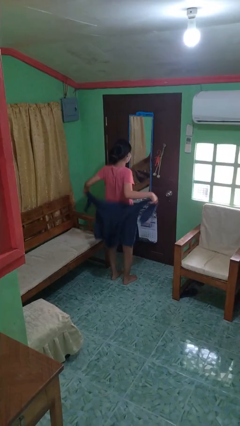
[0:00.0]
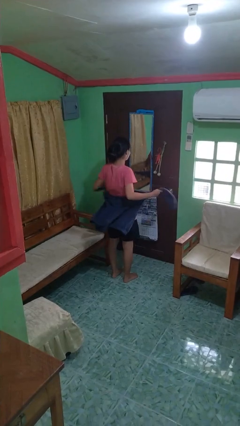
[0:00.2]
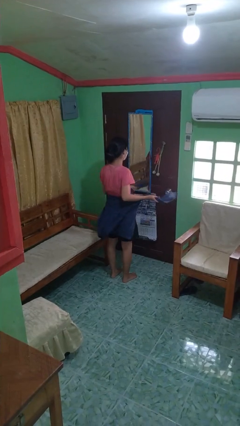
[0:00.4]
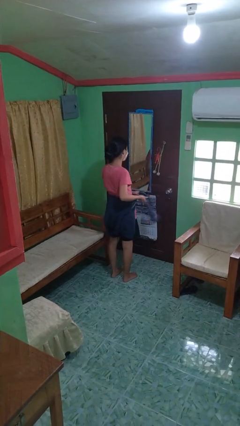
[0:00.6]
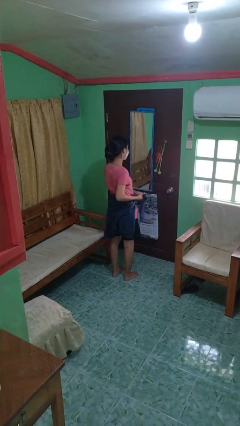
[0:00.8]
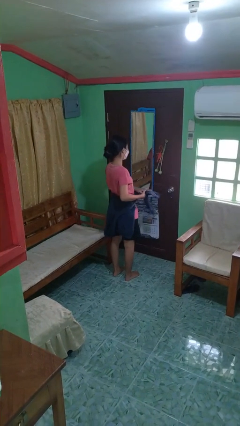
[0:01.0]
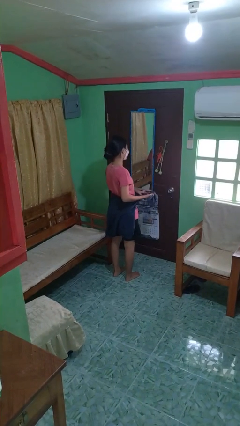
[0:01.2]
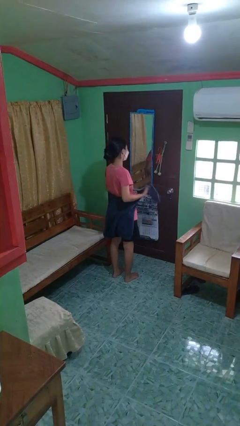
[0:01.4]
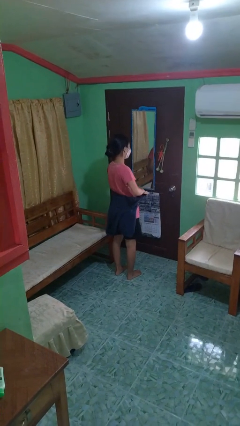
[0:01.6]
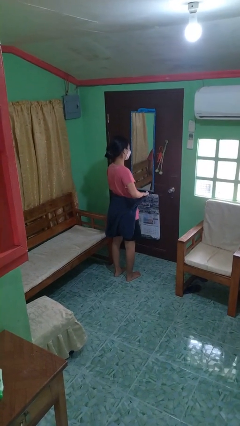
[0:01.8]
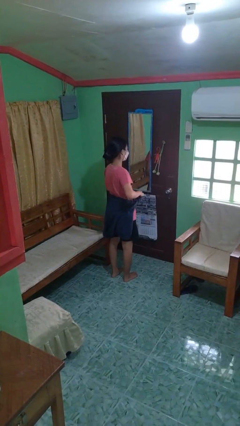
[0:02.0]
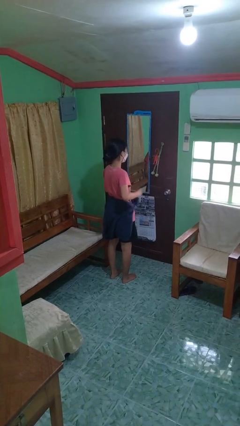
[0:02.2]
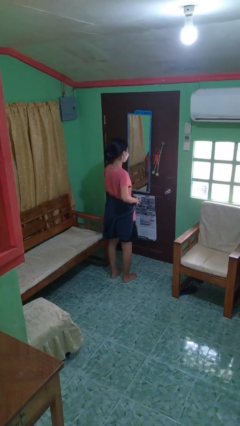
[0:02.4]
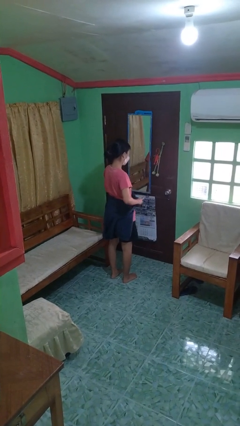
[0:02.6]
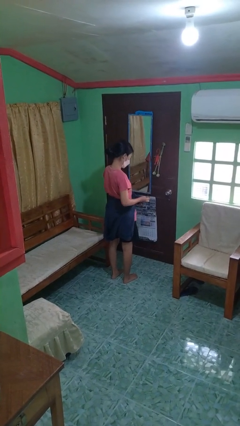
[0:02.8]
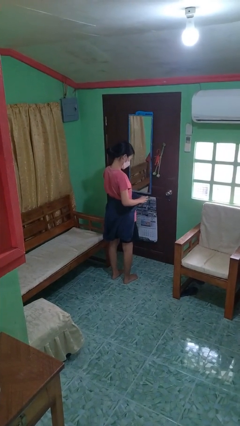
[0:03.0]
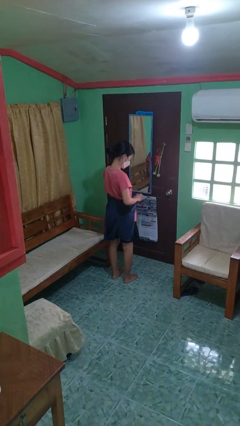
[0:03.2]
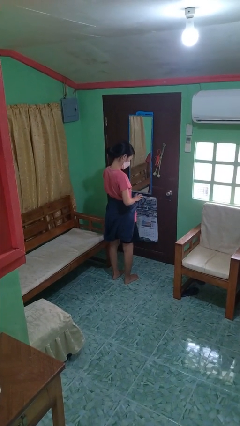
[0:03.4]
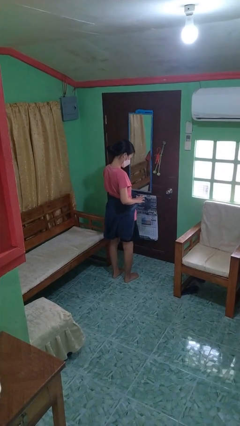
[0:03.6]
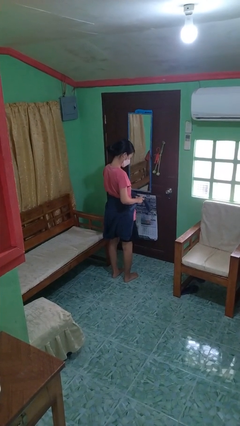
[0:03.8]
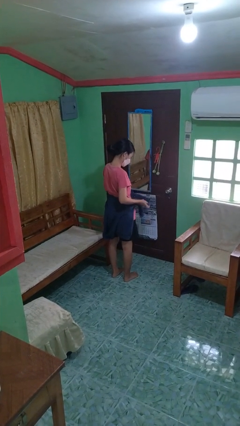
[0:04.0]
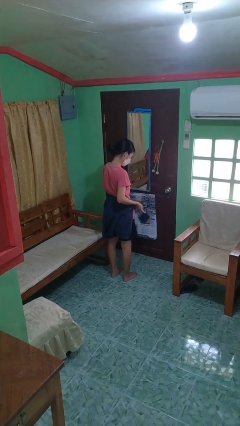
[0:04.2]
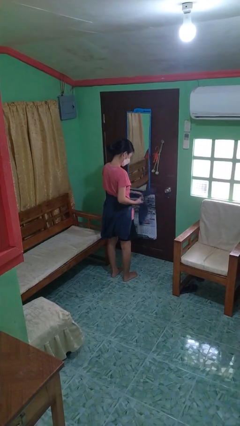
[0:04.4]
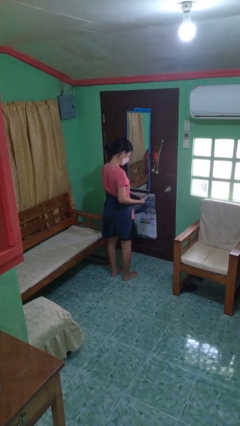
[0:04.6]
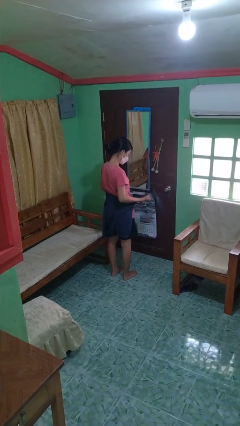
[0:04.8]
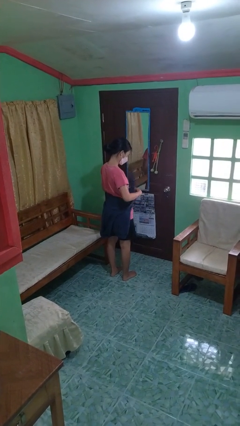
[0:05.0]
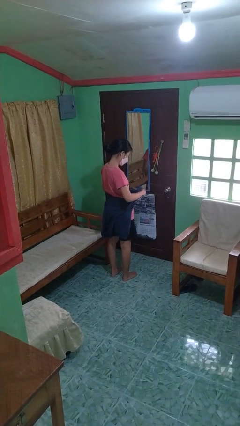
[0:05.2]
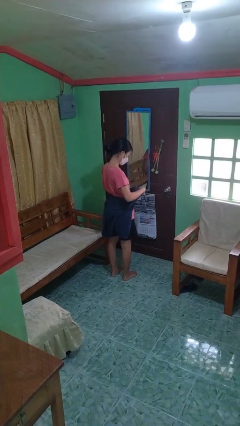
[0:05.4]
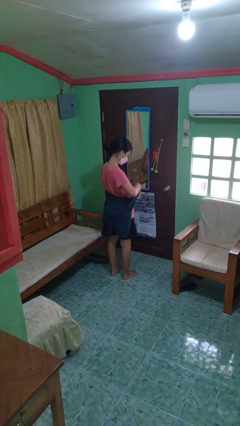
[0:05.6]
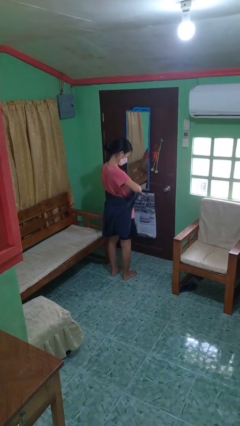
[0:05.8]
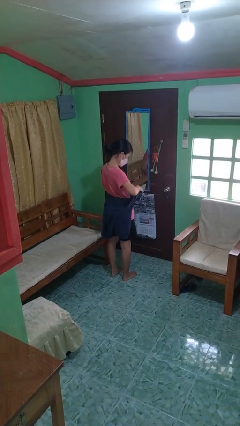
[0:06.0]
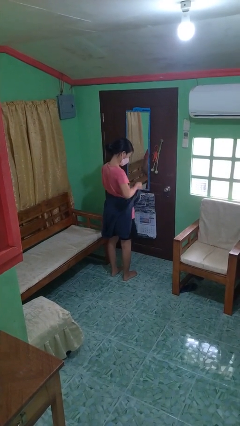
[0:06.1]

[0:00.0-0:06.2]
person ties jacket around waist

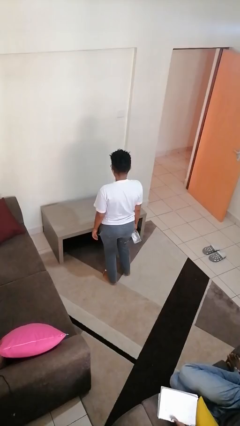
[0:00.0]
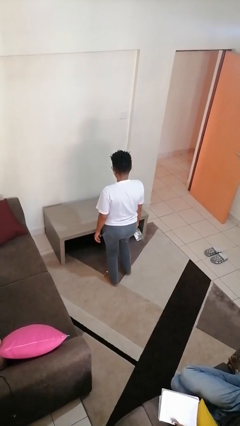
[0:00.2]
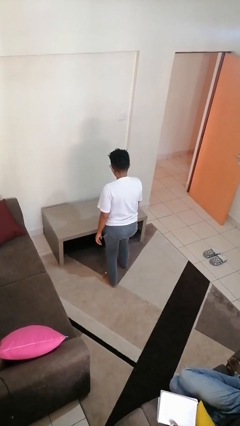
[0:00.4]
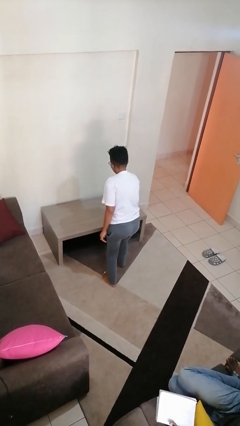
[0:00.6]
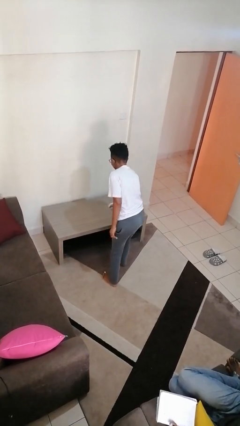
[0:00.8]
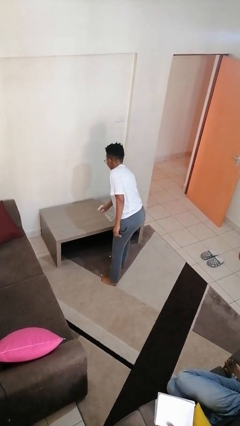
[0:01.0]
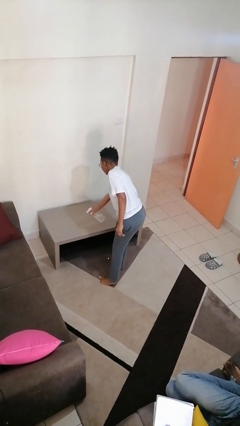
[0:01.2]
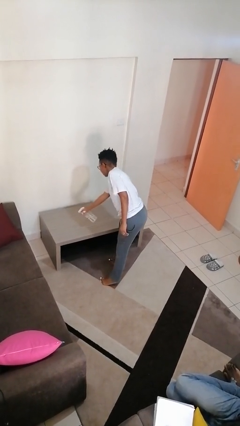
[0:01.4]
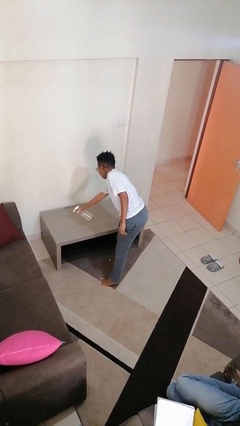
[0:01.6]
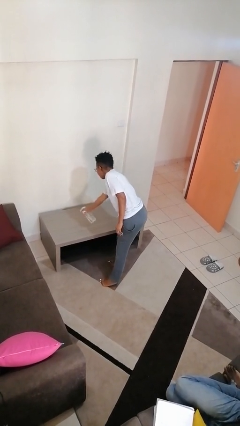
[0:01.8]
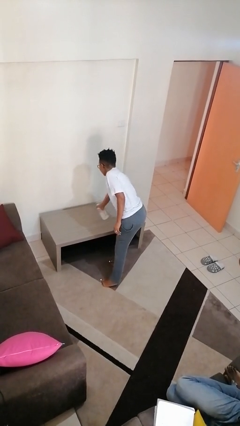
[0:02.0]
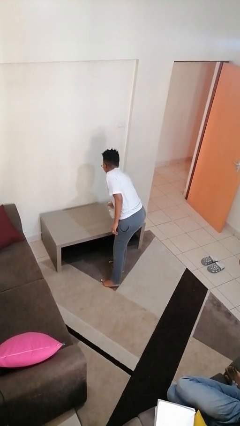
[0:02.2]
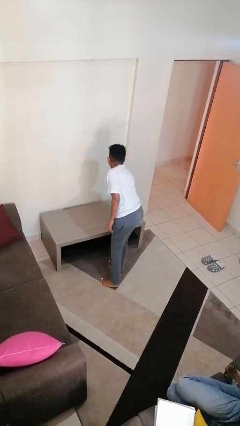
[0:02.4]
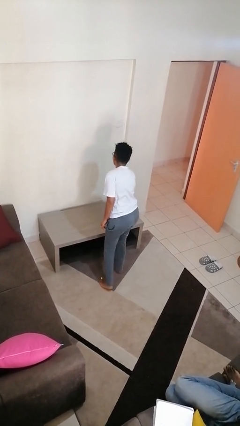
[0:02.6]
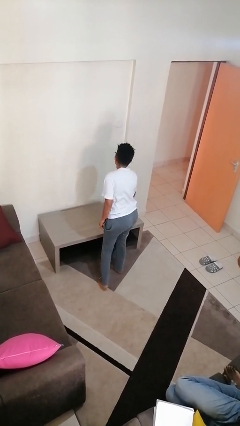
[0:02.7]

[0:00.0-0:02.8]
person sprays from bottle

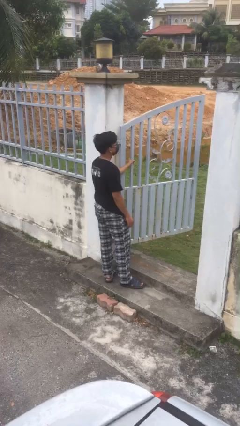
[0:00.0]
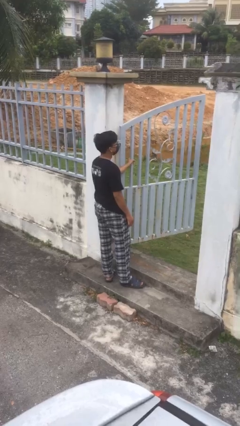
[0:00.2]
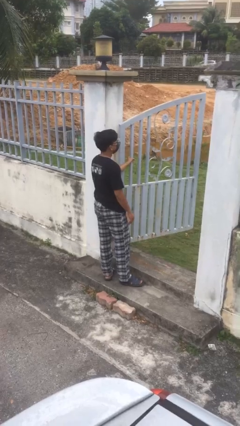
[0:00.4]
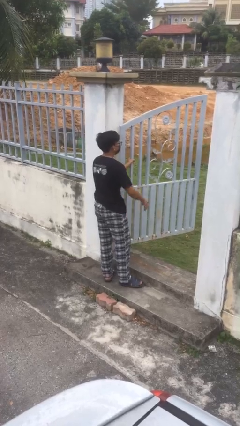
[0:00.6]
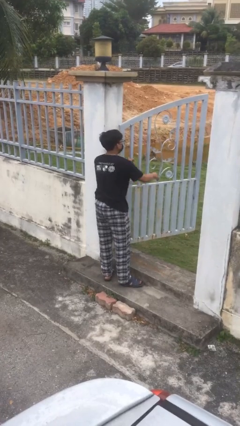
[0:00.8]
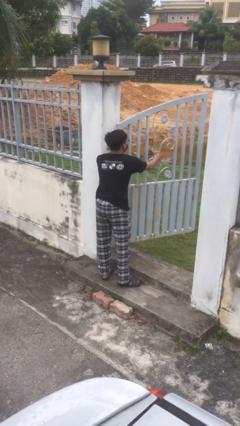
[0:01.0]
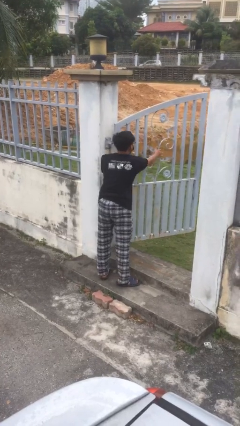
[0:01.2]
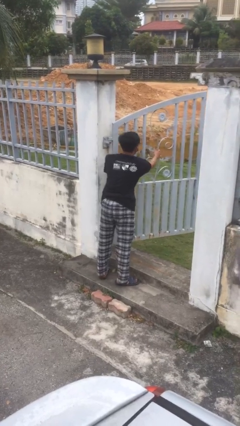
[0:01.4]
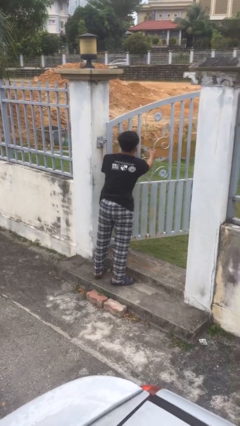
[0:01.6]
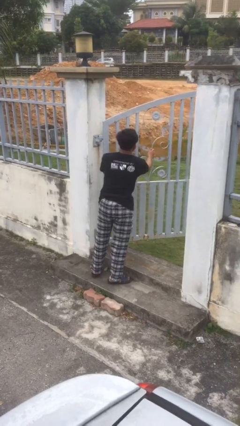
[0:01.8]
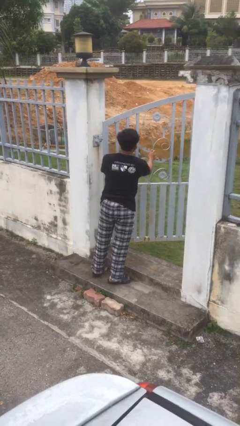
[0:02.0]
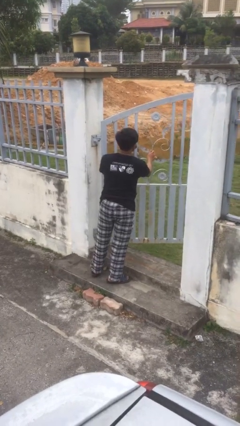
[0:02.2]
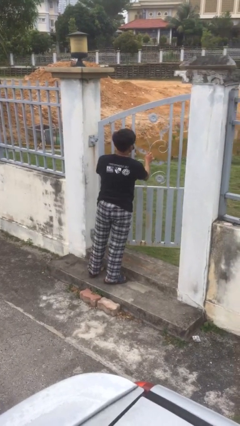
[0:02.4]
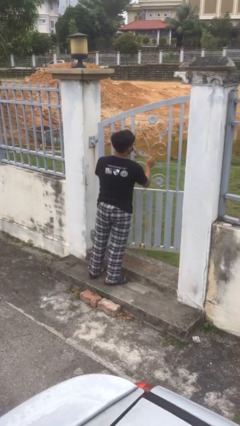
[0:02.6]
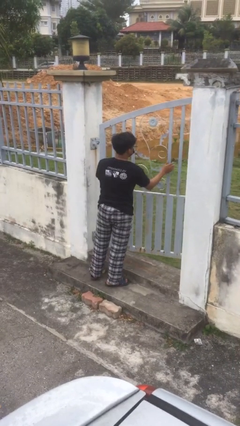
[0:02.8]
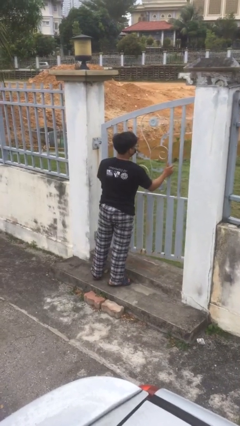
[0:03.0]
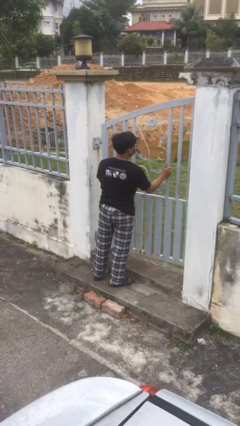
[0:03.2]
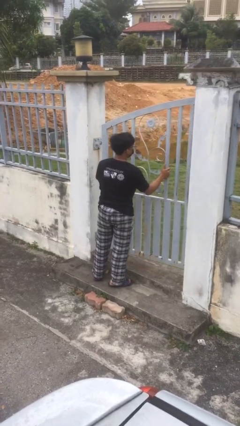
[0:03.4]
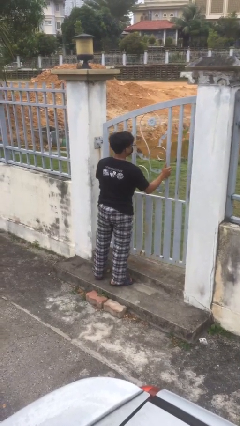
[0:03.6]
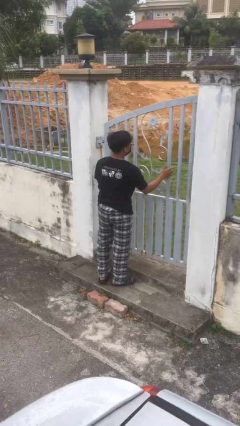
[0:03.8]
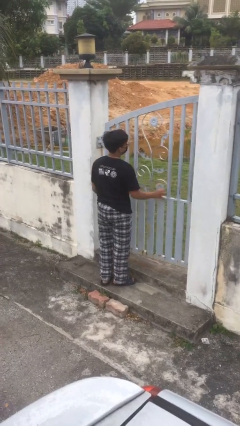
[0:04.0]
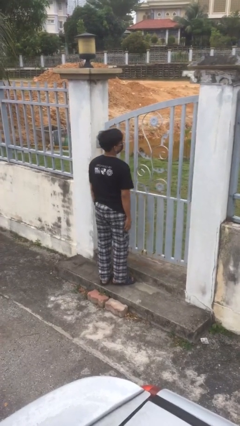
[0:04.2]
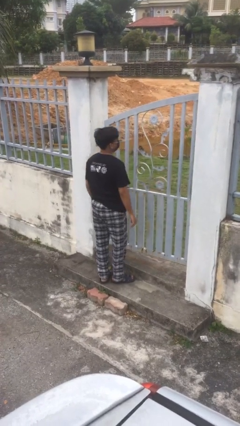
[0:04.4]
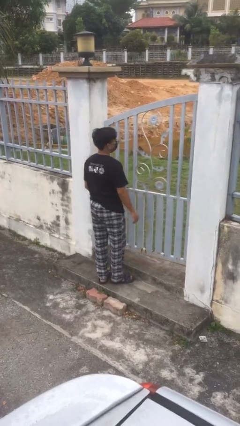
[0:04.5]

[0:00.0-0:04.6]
person closes facility door

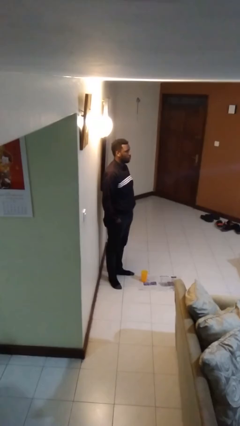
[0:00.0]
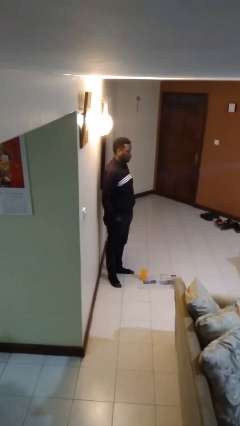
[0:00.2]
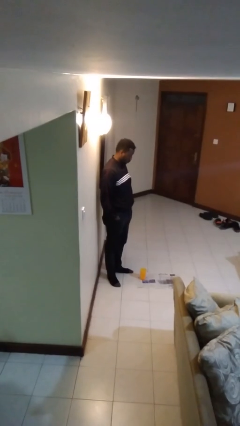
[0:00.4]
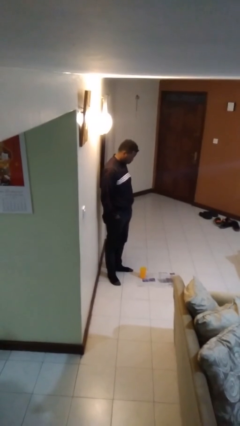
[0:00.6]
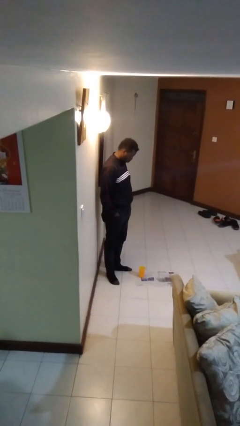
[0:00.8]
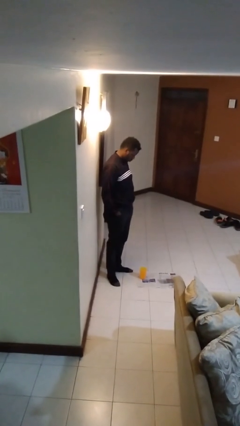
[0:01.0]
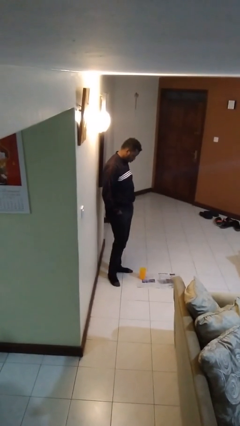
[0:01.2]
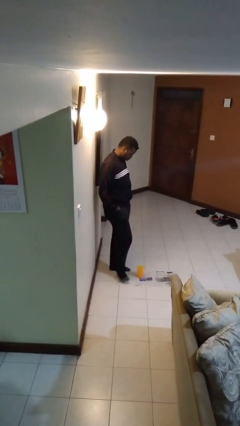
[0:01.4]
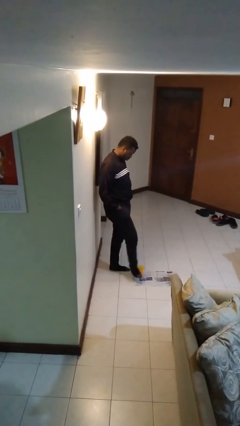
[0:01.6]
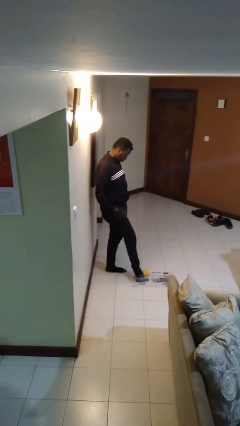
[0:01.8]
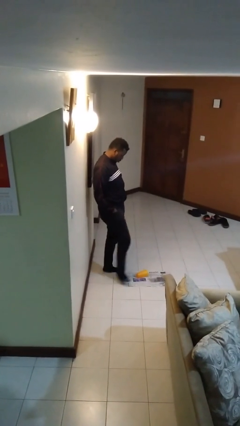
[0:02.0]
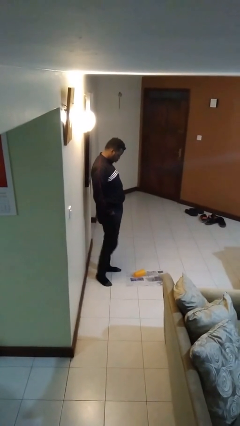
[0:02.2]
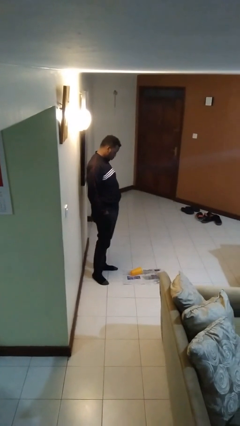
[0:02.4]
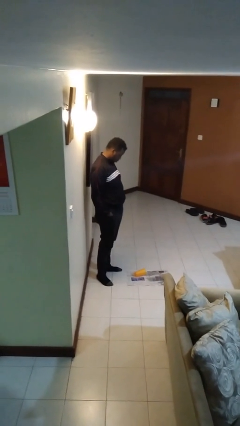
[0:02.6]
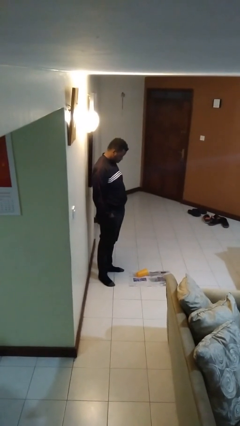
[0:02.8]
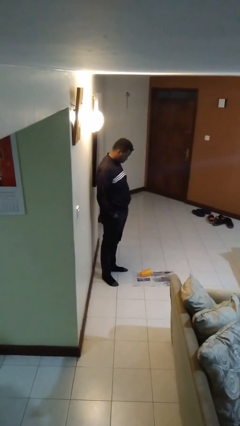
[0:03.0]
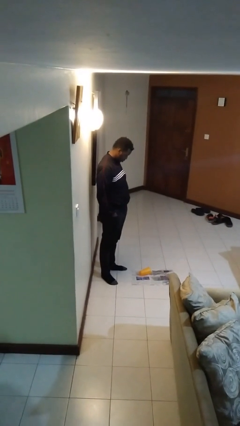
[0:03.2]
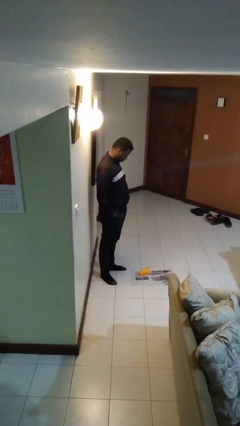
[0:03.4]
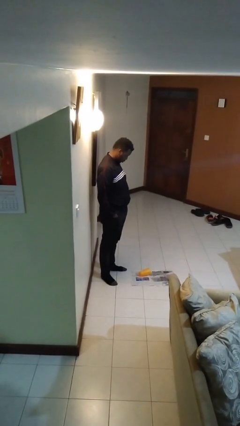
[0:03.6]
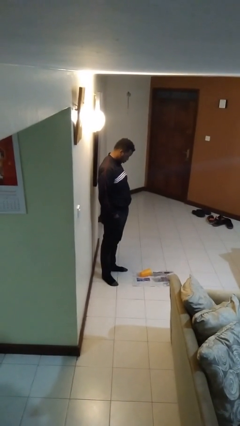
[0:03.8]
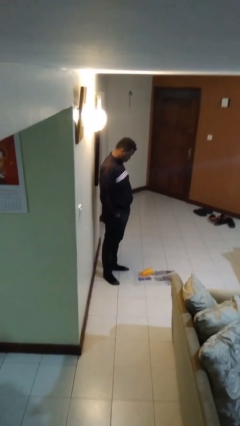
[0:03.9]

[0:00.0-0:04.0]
person spills on floor
